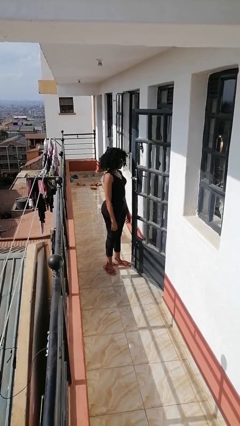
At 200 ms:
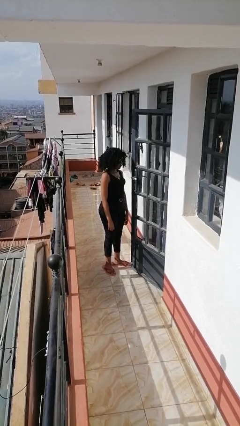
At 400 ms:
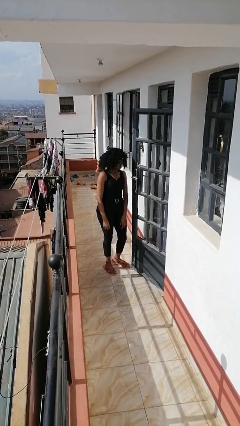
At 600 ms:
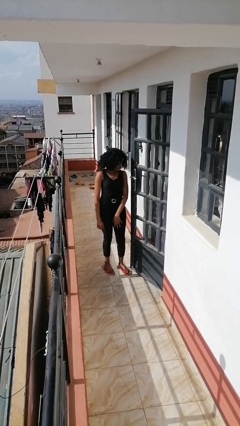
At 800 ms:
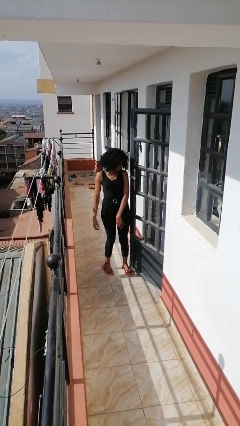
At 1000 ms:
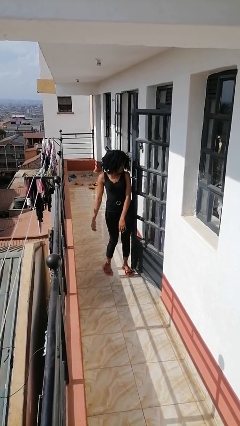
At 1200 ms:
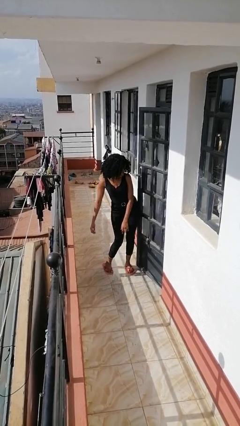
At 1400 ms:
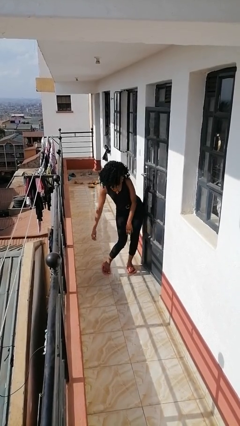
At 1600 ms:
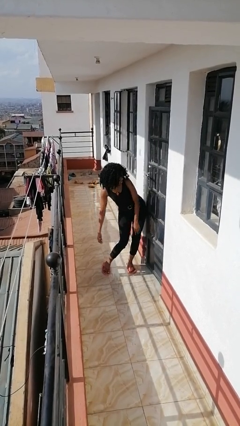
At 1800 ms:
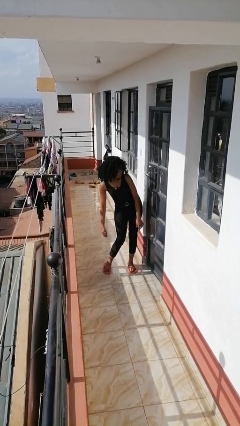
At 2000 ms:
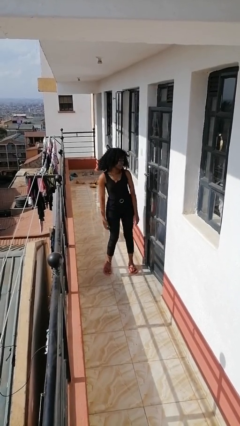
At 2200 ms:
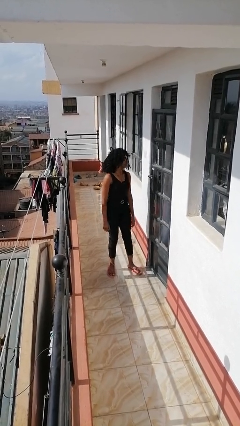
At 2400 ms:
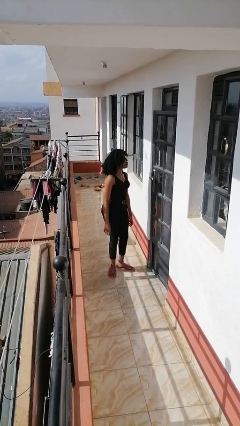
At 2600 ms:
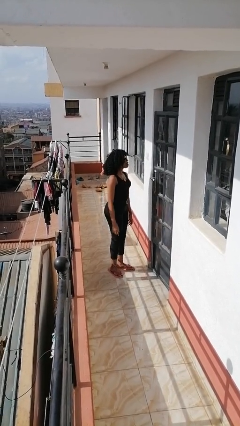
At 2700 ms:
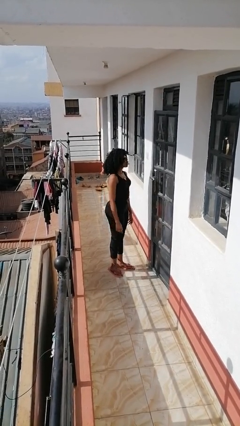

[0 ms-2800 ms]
person closes door with hip

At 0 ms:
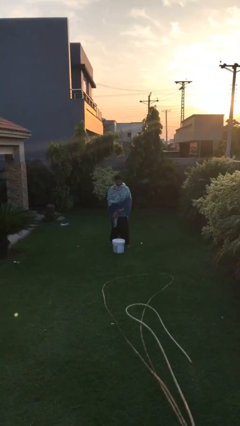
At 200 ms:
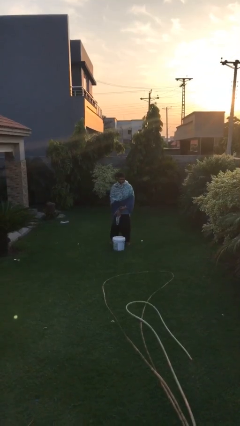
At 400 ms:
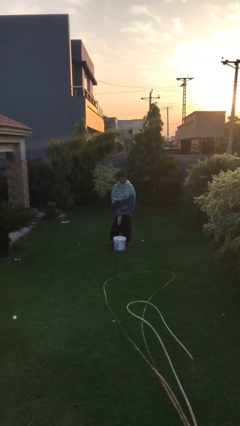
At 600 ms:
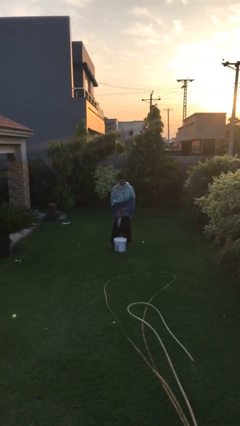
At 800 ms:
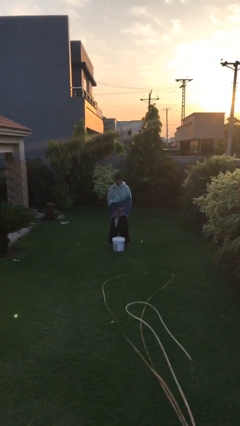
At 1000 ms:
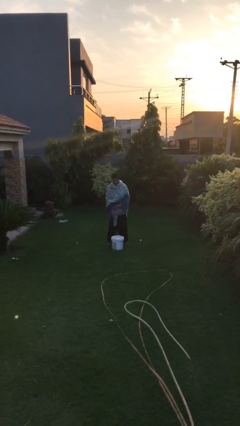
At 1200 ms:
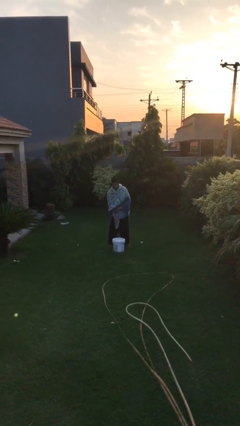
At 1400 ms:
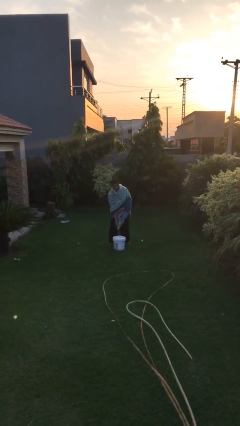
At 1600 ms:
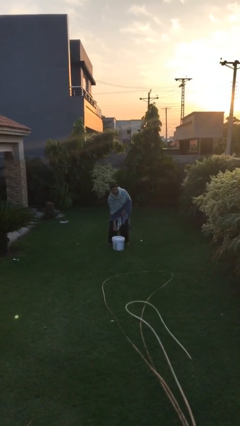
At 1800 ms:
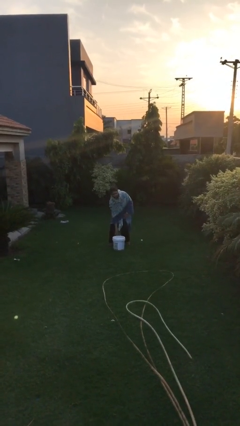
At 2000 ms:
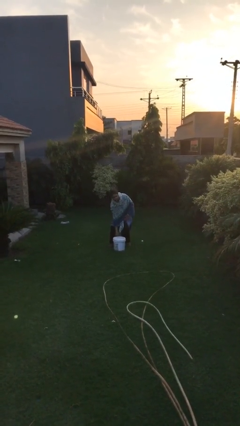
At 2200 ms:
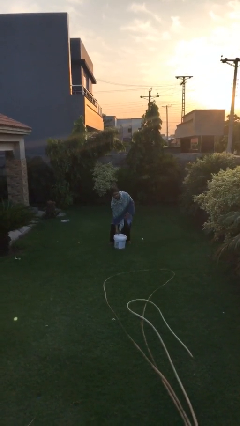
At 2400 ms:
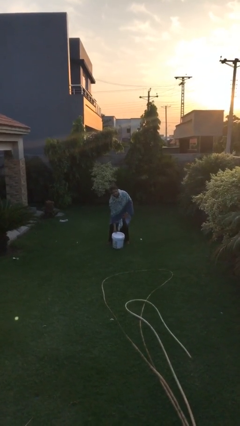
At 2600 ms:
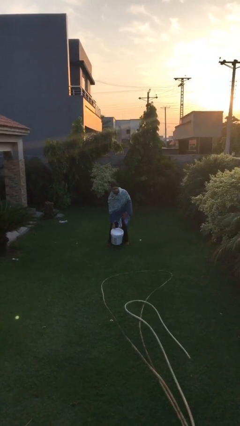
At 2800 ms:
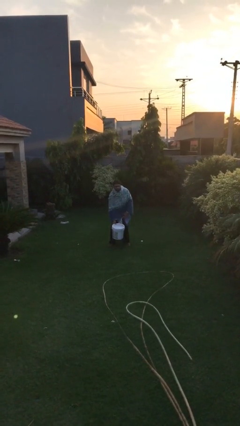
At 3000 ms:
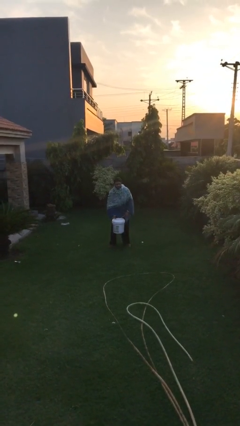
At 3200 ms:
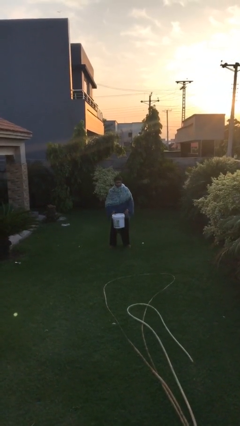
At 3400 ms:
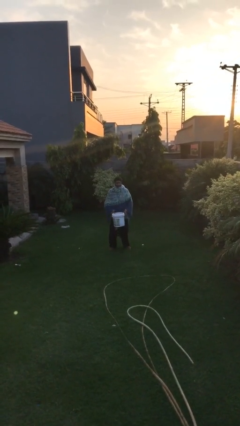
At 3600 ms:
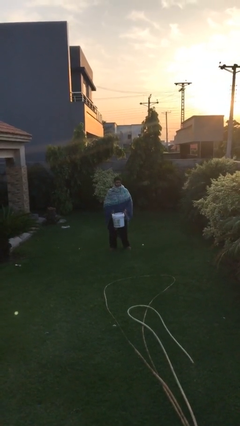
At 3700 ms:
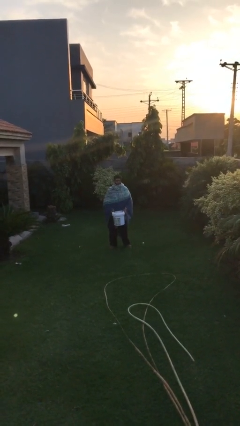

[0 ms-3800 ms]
person picks up object from floor

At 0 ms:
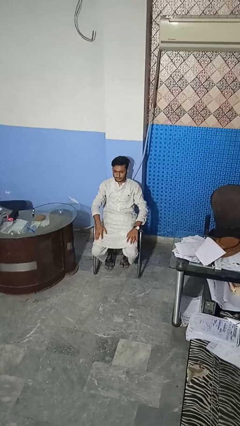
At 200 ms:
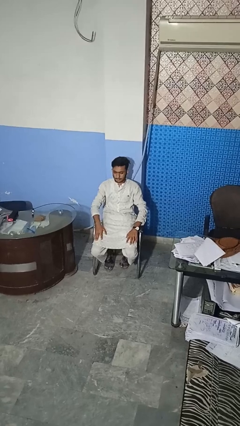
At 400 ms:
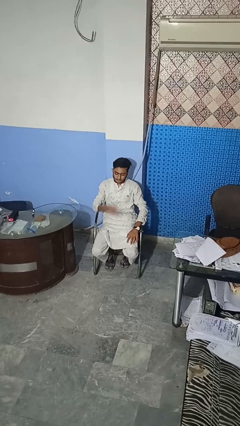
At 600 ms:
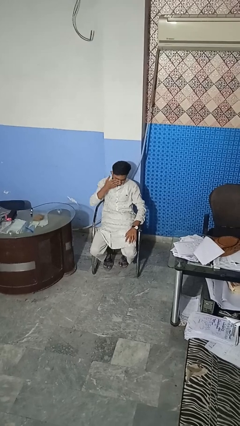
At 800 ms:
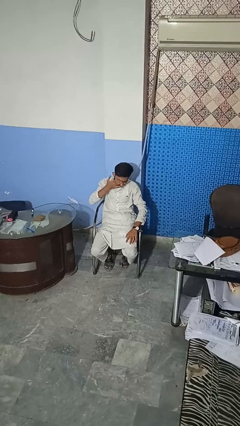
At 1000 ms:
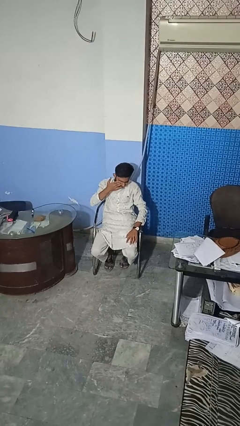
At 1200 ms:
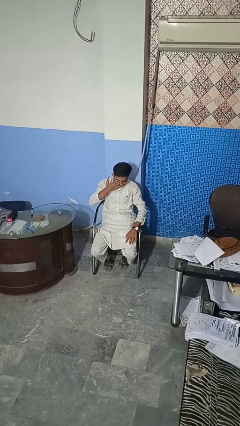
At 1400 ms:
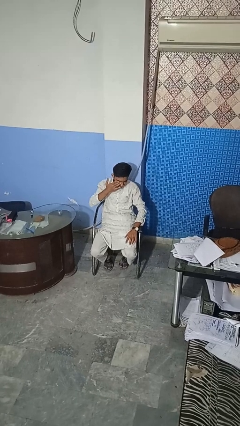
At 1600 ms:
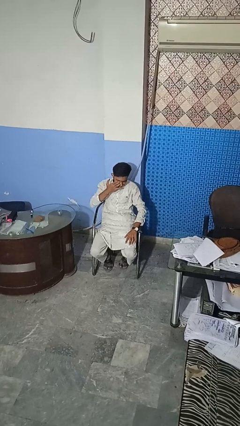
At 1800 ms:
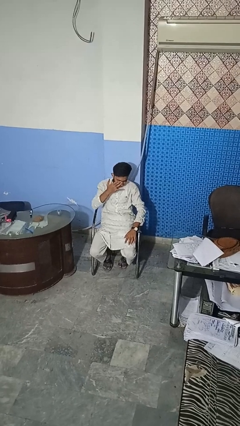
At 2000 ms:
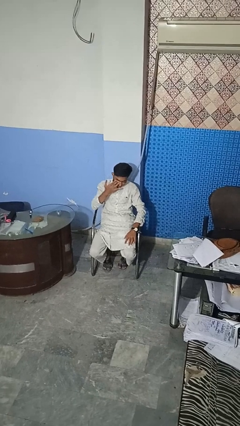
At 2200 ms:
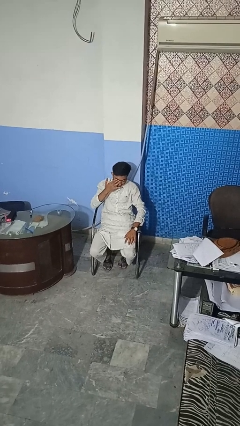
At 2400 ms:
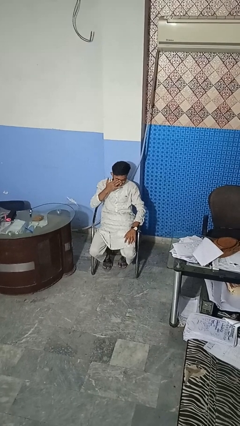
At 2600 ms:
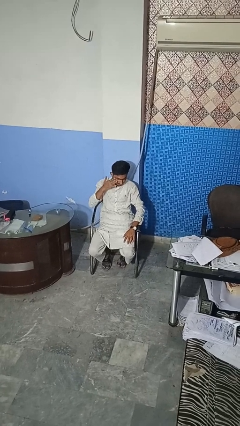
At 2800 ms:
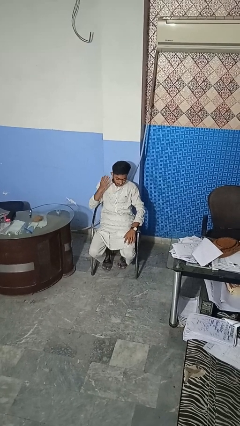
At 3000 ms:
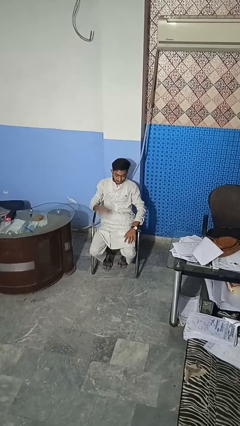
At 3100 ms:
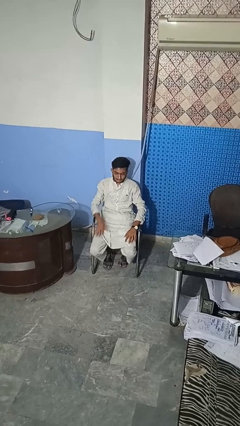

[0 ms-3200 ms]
person rubs eyes

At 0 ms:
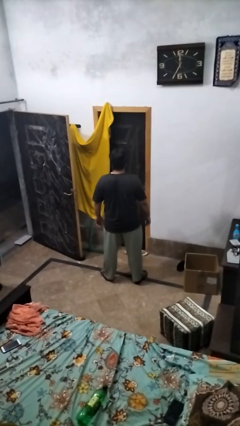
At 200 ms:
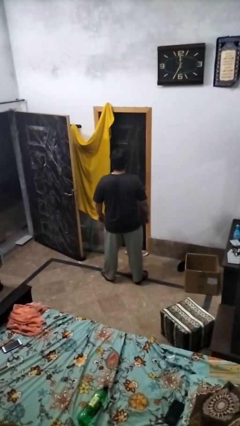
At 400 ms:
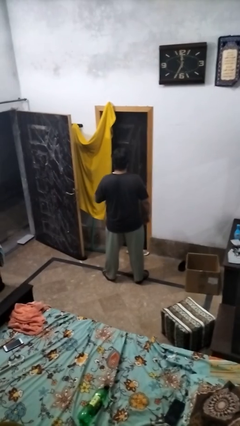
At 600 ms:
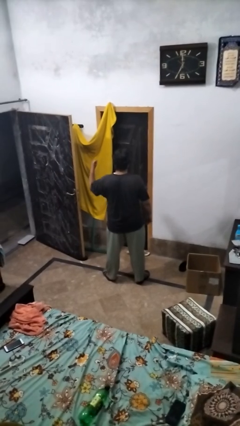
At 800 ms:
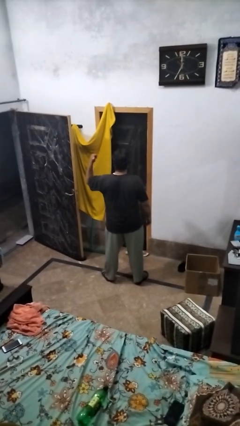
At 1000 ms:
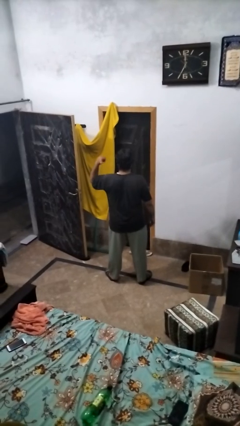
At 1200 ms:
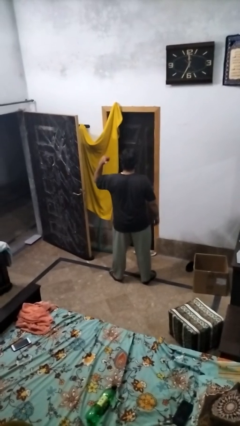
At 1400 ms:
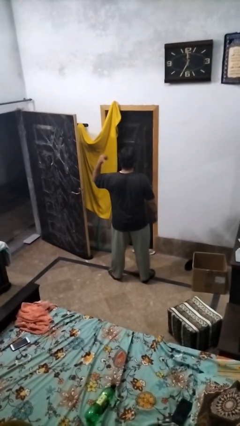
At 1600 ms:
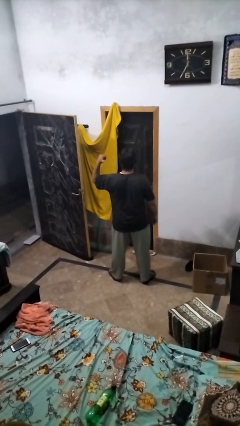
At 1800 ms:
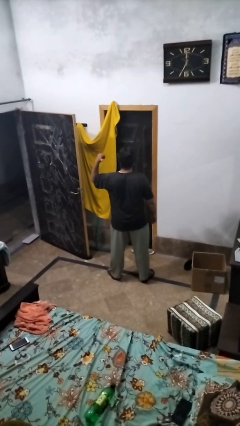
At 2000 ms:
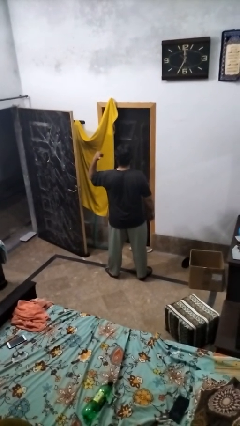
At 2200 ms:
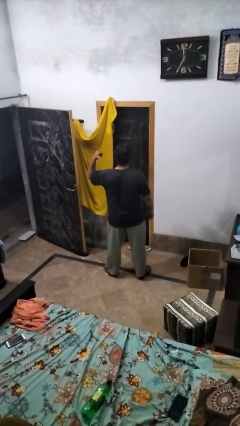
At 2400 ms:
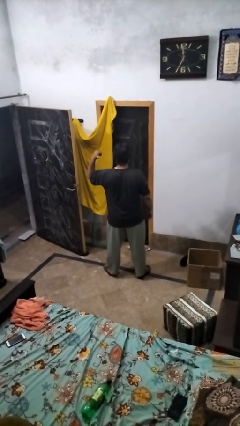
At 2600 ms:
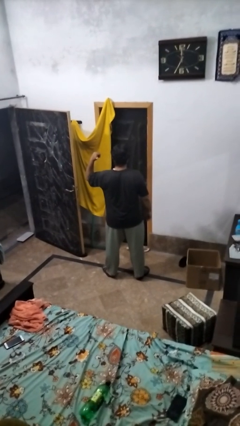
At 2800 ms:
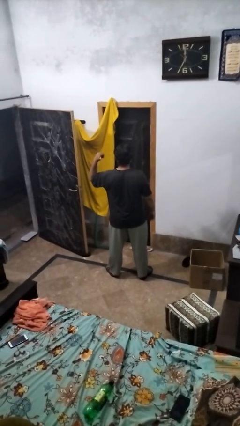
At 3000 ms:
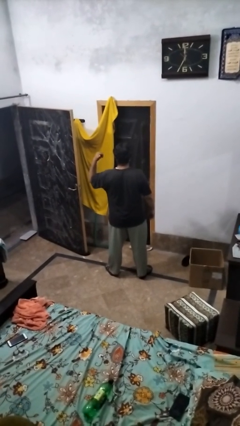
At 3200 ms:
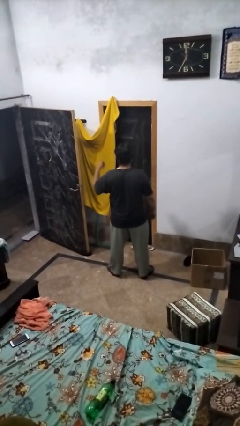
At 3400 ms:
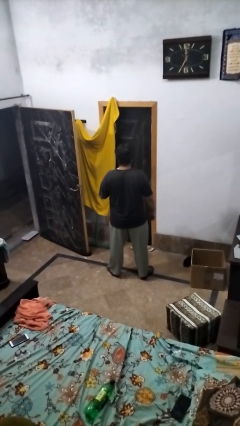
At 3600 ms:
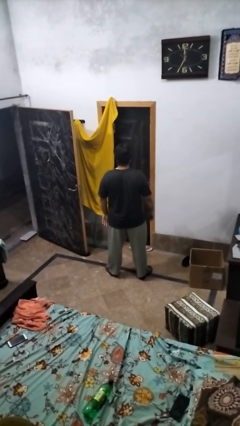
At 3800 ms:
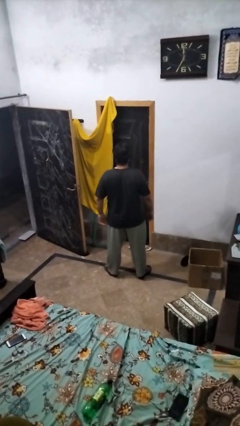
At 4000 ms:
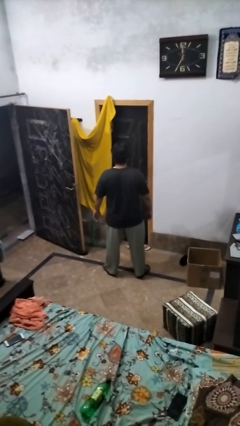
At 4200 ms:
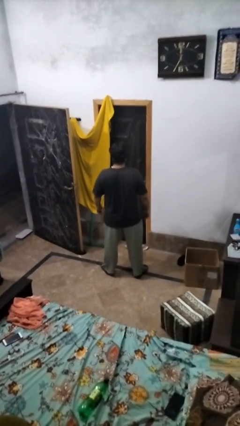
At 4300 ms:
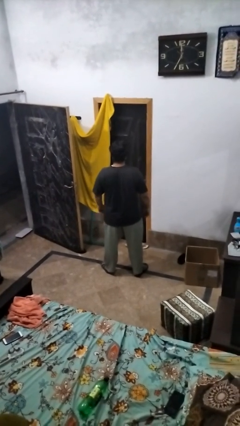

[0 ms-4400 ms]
person gestures behind me

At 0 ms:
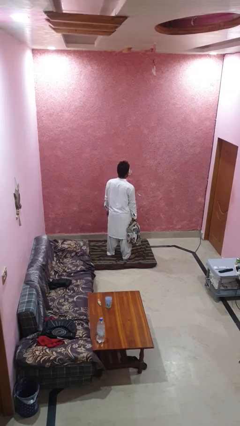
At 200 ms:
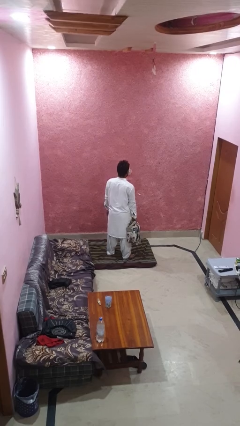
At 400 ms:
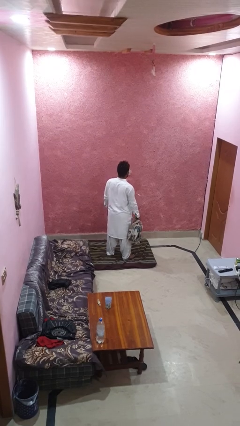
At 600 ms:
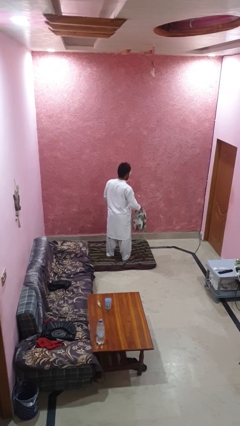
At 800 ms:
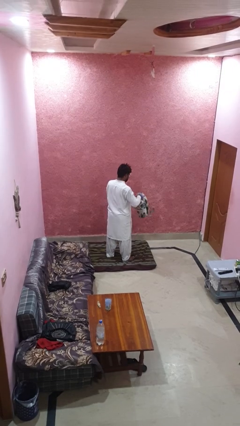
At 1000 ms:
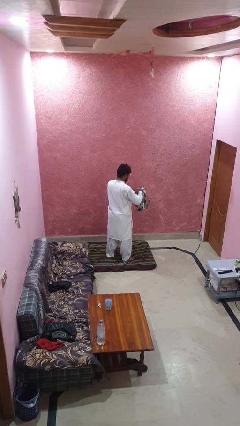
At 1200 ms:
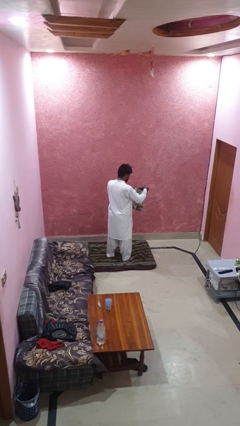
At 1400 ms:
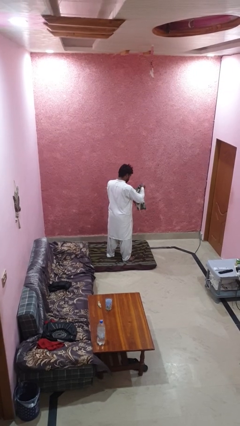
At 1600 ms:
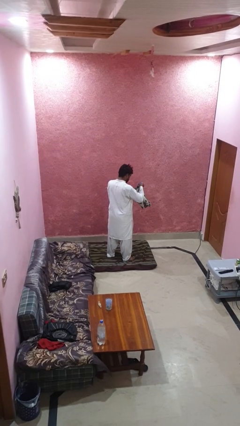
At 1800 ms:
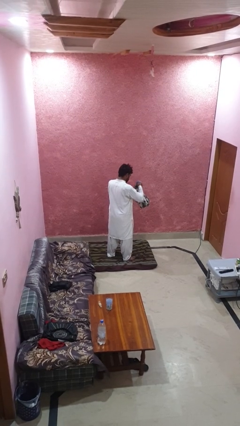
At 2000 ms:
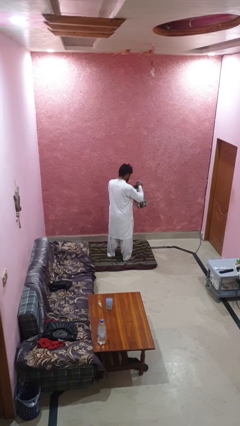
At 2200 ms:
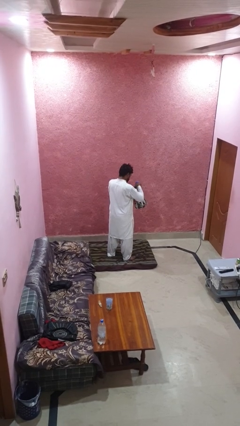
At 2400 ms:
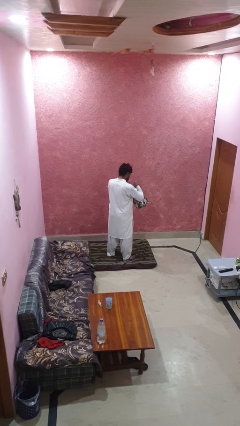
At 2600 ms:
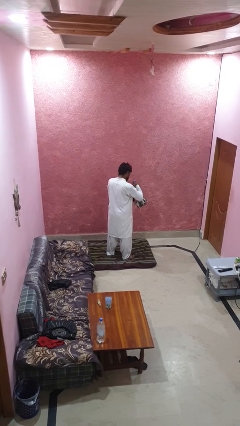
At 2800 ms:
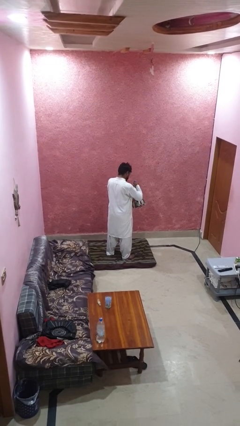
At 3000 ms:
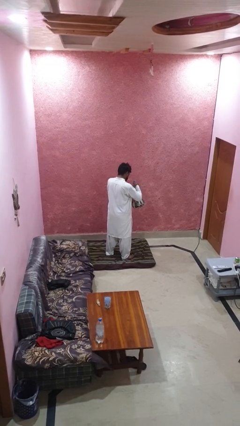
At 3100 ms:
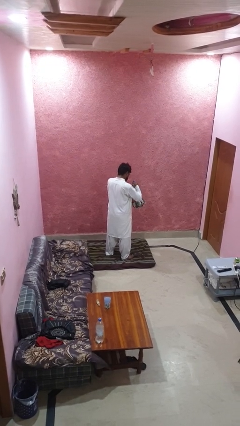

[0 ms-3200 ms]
person searches in backpack

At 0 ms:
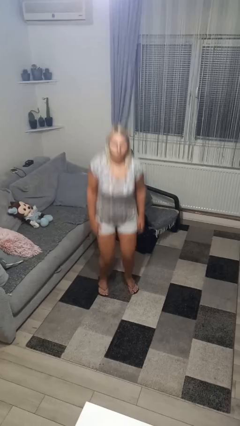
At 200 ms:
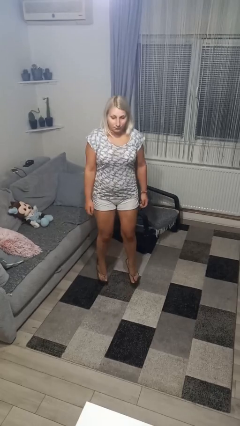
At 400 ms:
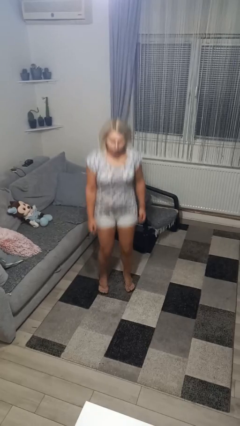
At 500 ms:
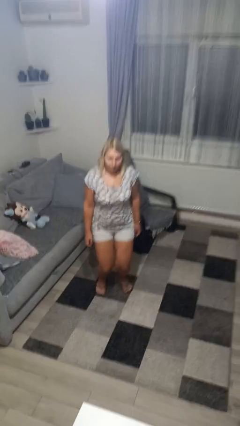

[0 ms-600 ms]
person jumps
